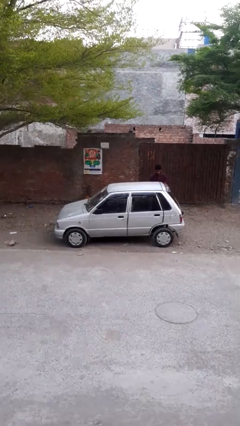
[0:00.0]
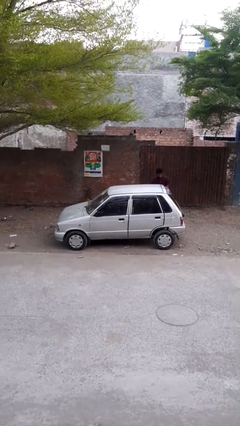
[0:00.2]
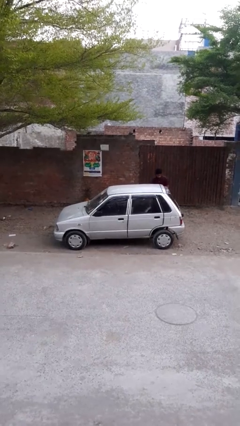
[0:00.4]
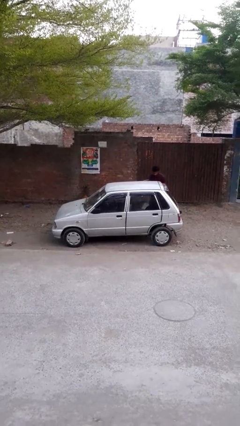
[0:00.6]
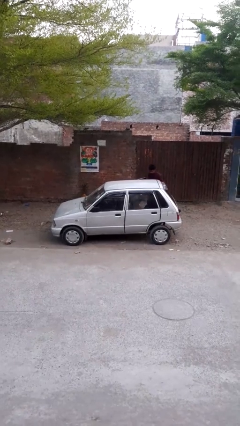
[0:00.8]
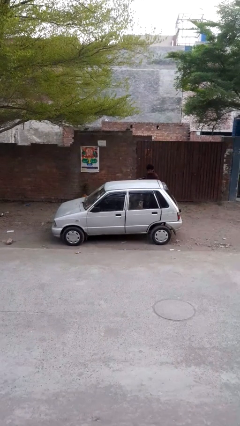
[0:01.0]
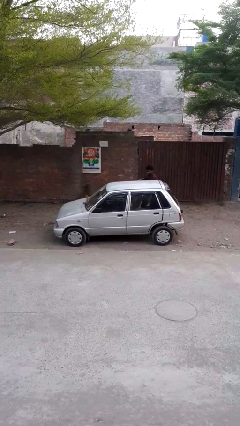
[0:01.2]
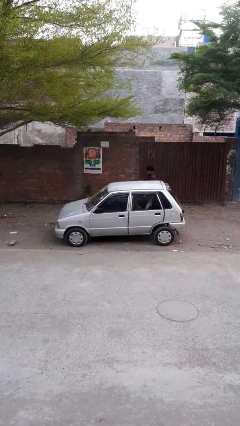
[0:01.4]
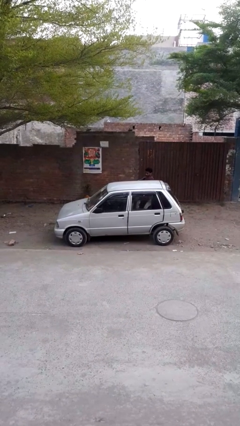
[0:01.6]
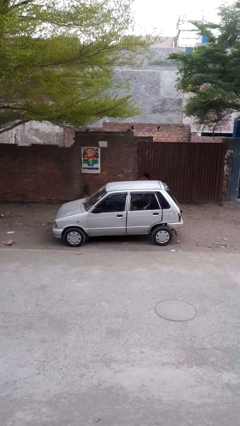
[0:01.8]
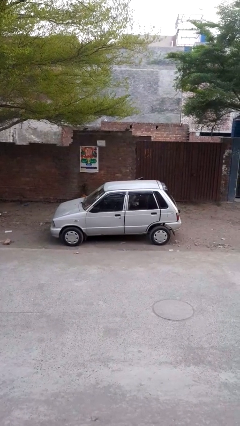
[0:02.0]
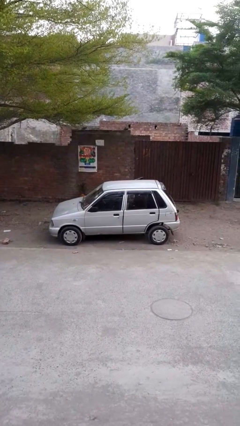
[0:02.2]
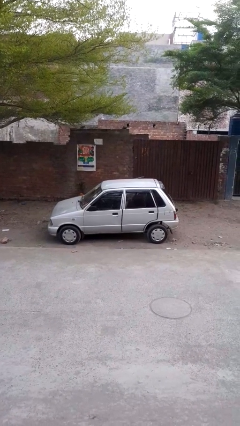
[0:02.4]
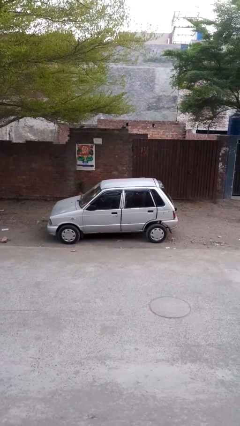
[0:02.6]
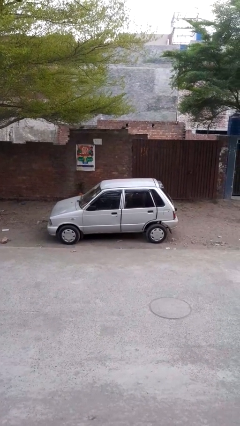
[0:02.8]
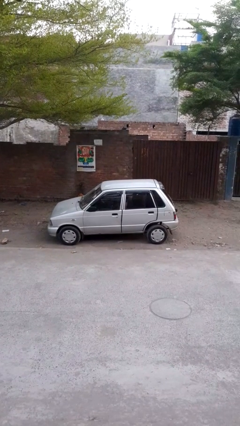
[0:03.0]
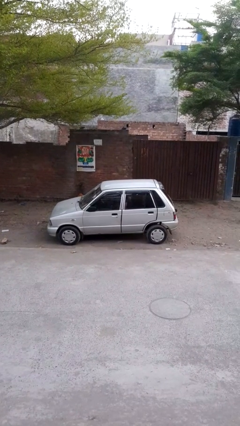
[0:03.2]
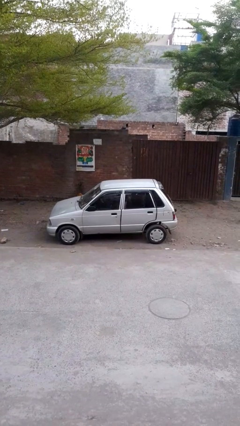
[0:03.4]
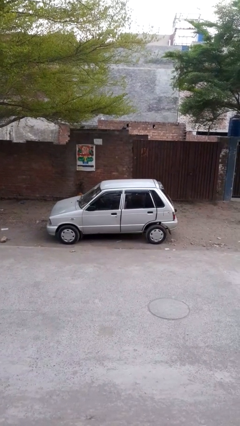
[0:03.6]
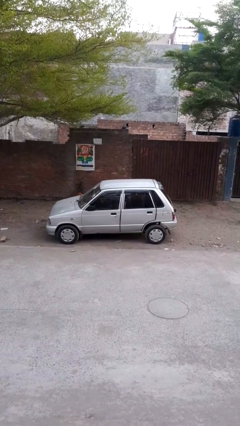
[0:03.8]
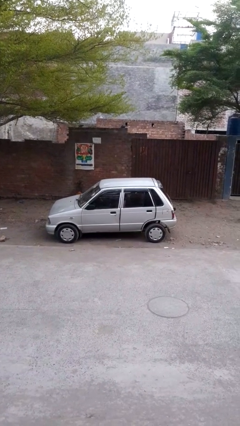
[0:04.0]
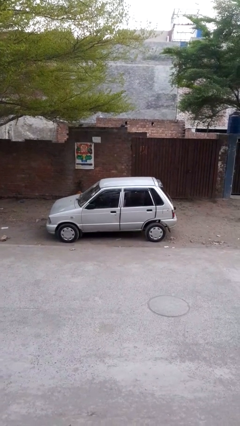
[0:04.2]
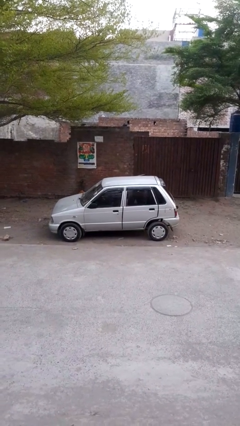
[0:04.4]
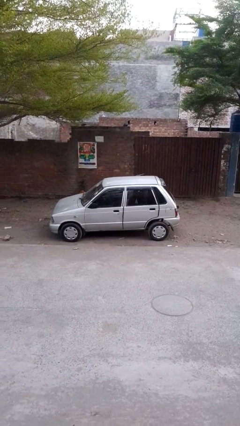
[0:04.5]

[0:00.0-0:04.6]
car picks up person

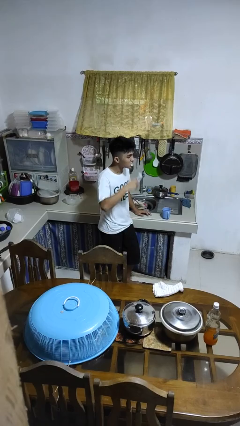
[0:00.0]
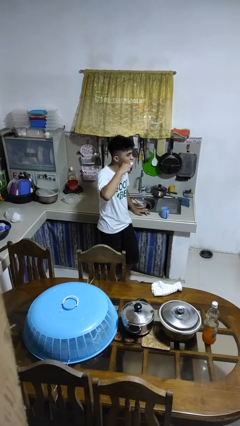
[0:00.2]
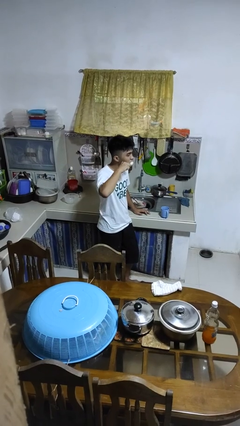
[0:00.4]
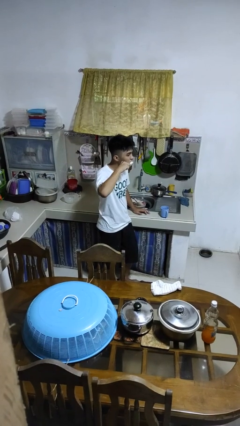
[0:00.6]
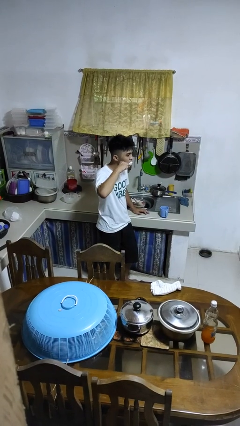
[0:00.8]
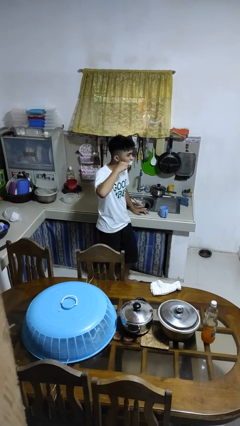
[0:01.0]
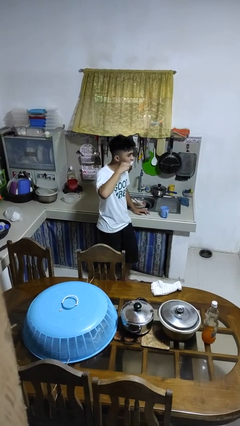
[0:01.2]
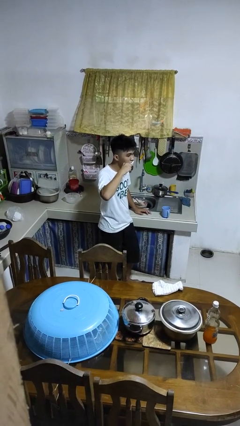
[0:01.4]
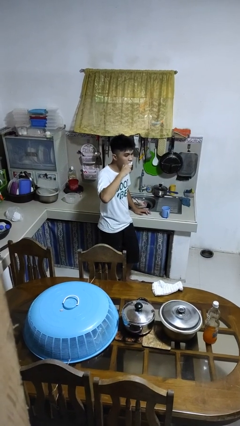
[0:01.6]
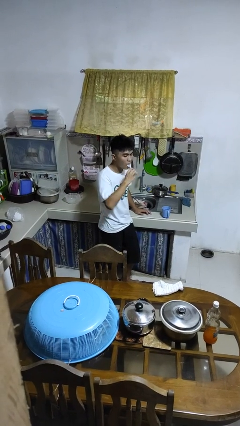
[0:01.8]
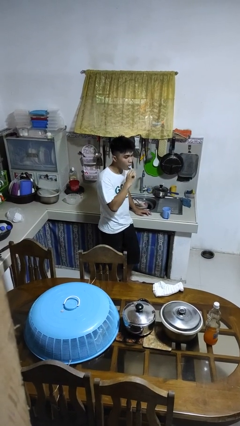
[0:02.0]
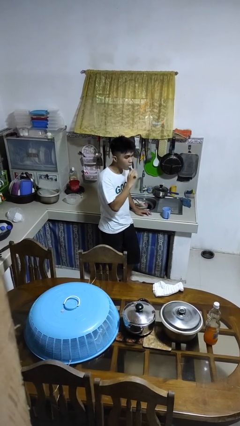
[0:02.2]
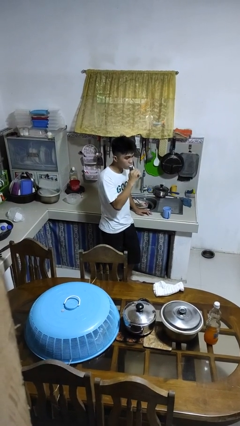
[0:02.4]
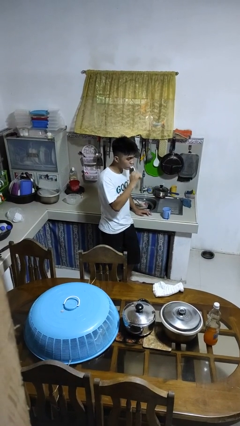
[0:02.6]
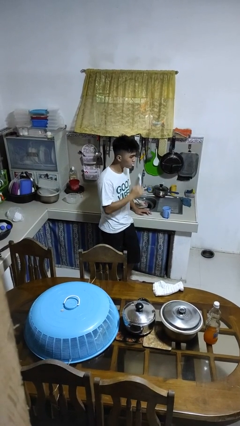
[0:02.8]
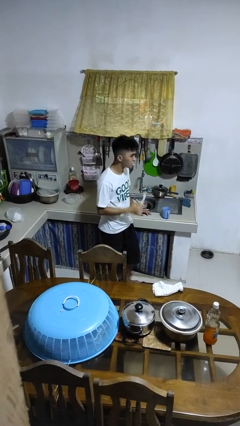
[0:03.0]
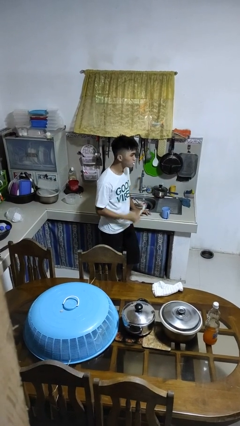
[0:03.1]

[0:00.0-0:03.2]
person brushes teeth

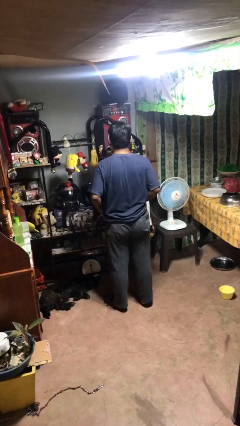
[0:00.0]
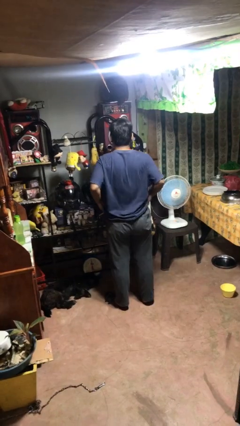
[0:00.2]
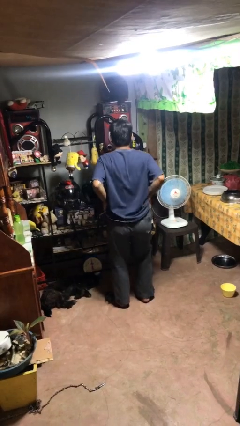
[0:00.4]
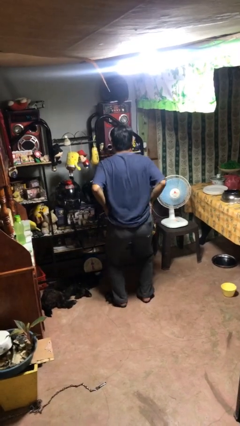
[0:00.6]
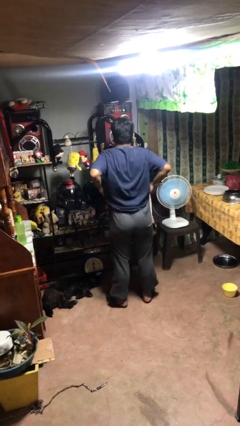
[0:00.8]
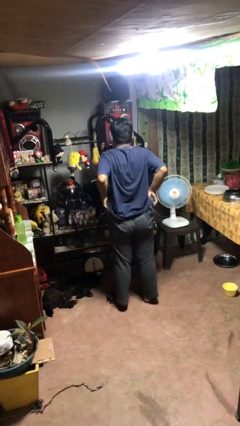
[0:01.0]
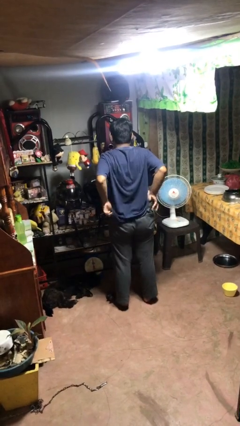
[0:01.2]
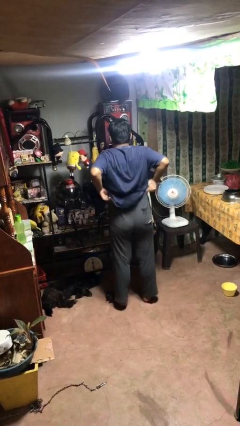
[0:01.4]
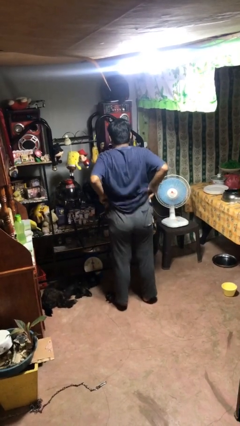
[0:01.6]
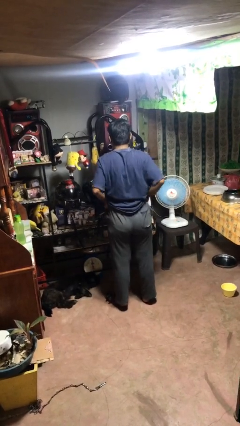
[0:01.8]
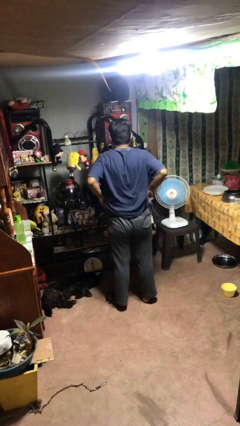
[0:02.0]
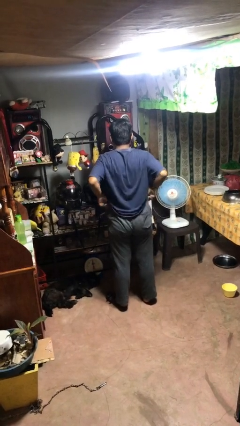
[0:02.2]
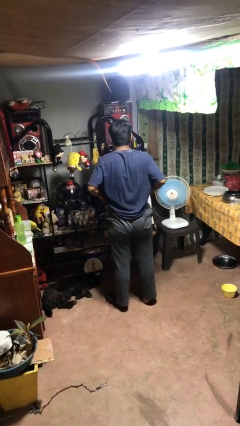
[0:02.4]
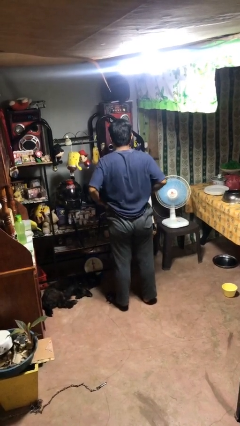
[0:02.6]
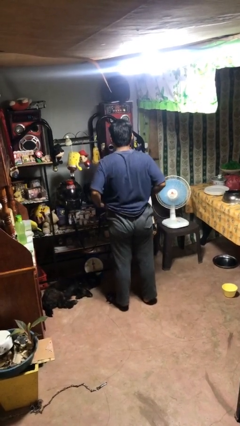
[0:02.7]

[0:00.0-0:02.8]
person hikes up pants

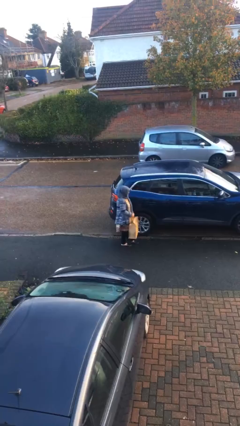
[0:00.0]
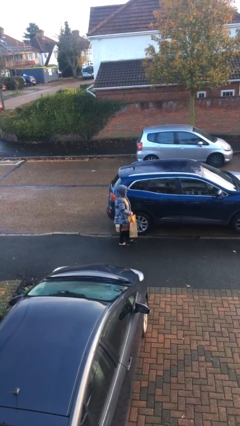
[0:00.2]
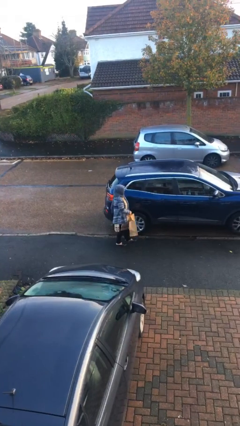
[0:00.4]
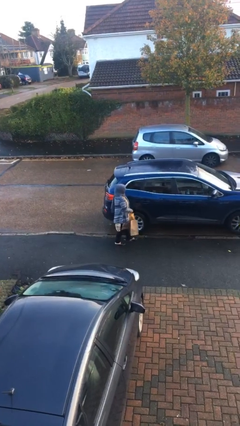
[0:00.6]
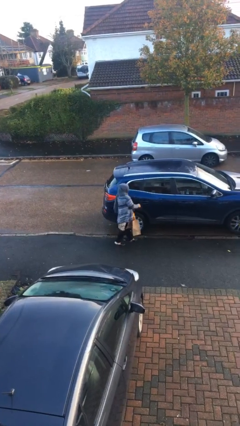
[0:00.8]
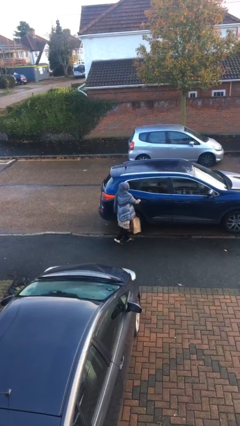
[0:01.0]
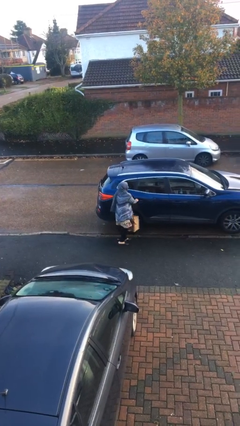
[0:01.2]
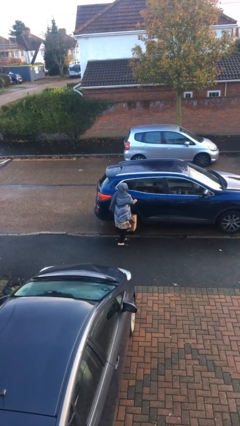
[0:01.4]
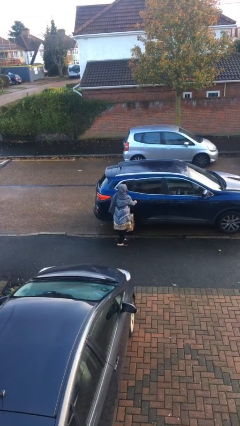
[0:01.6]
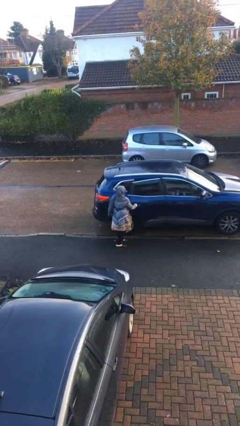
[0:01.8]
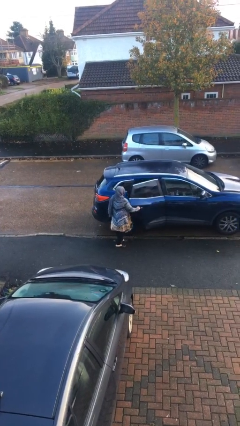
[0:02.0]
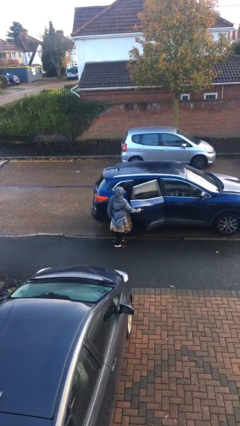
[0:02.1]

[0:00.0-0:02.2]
person opens car door

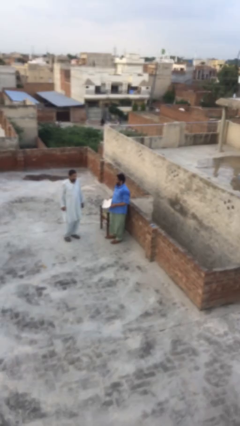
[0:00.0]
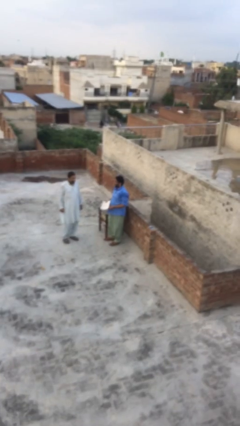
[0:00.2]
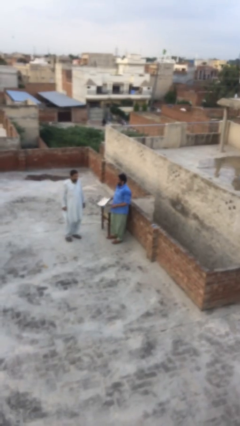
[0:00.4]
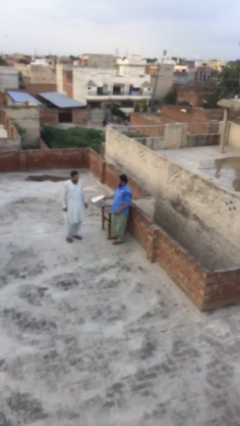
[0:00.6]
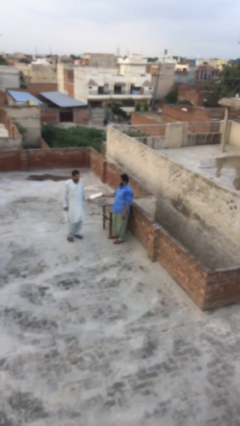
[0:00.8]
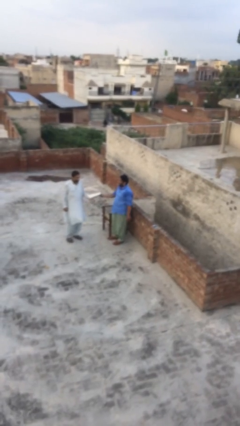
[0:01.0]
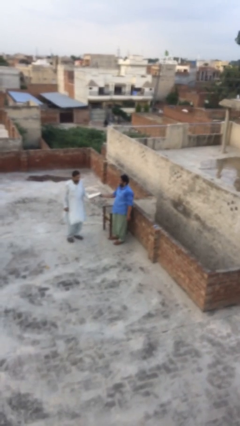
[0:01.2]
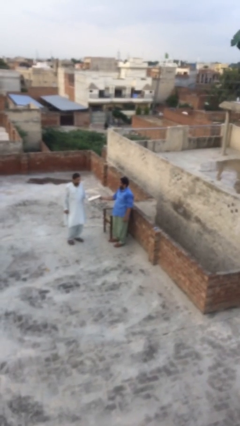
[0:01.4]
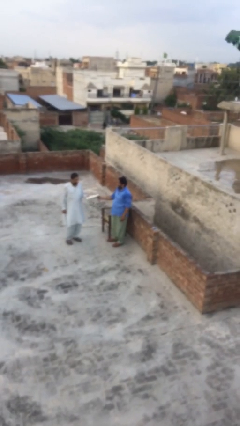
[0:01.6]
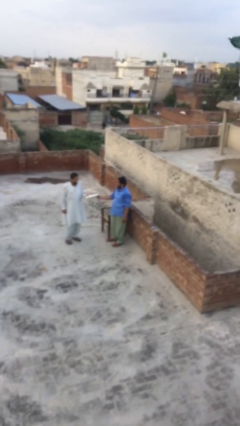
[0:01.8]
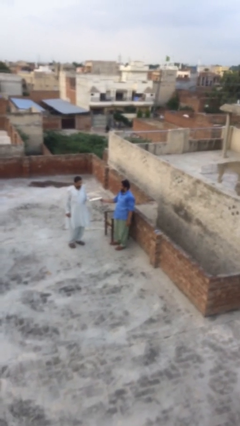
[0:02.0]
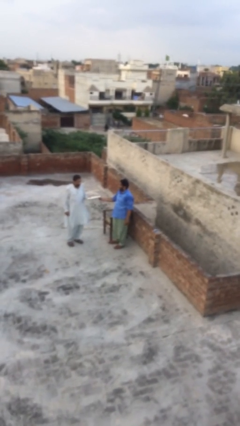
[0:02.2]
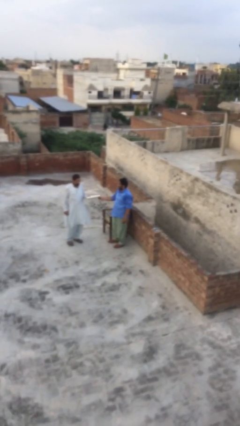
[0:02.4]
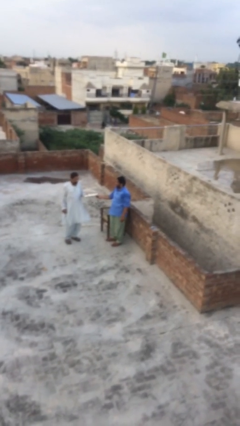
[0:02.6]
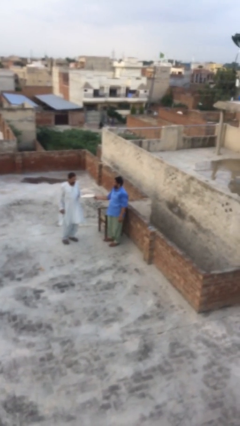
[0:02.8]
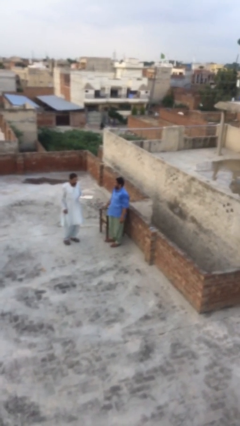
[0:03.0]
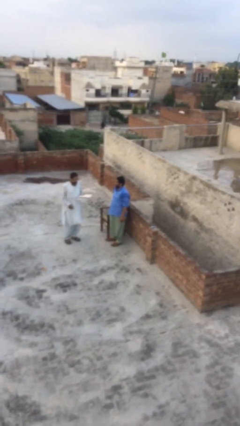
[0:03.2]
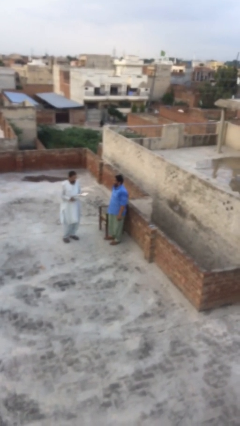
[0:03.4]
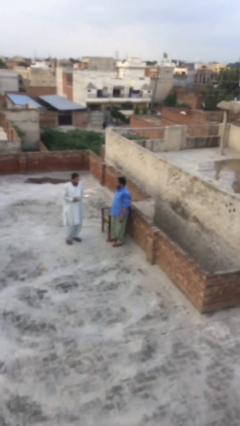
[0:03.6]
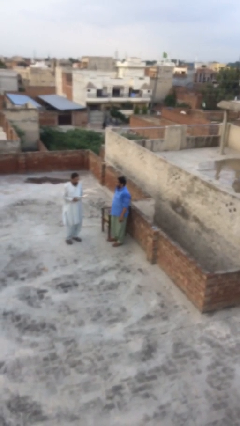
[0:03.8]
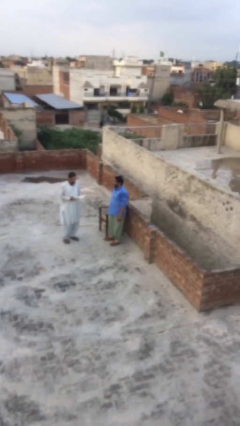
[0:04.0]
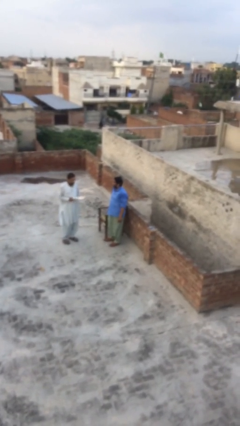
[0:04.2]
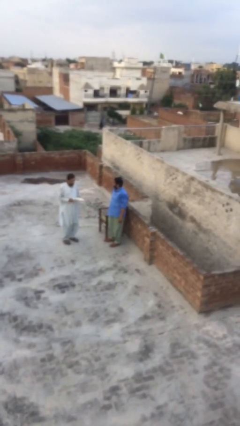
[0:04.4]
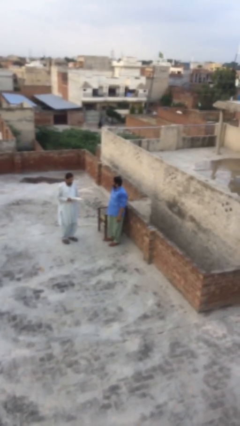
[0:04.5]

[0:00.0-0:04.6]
person transfers object to person
